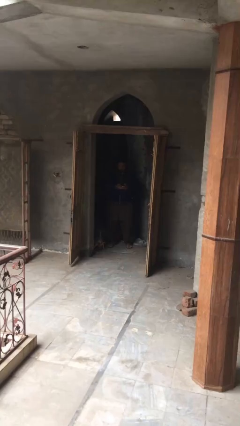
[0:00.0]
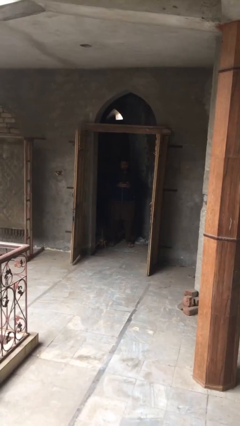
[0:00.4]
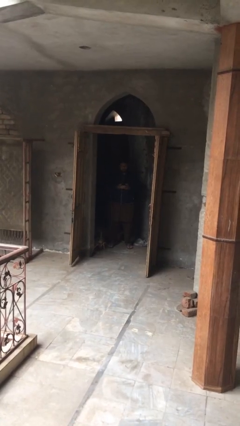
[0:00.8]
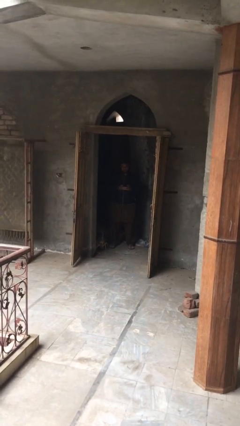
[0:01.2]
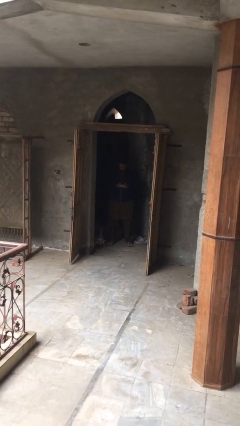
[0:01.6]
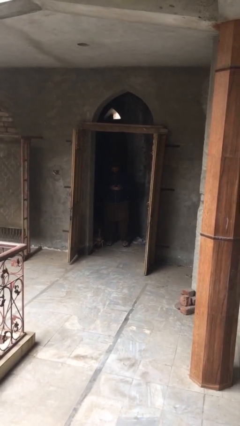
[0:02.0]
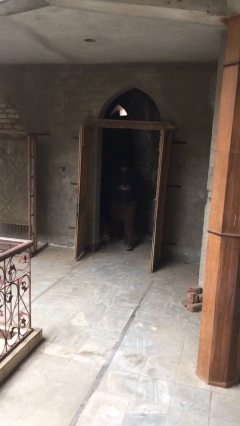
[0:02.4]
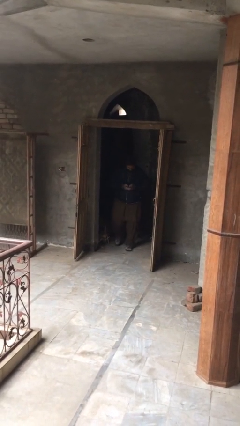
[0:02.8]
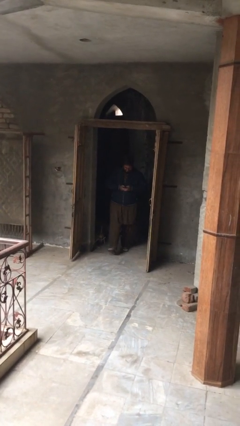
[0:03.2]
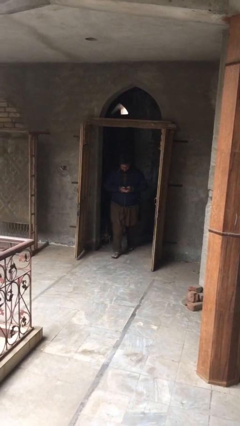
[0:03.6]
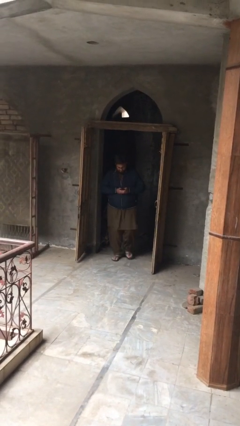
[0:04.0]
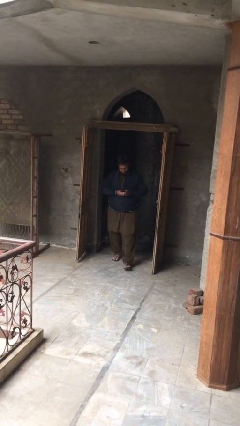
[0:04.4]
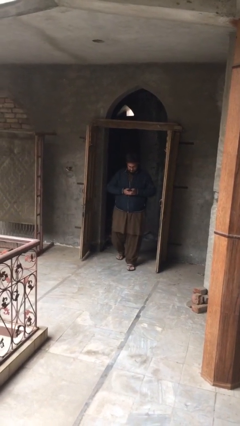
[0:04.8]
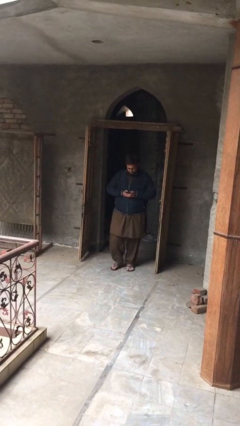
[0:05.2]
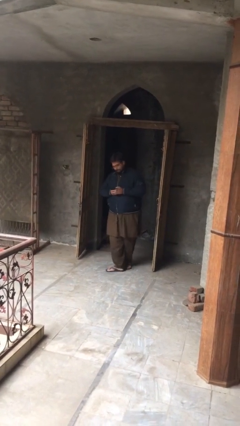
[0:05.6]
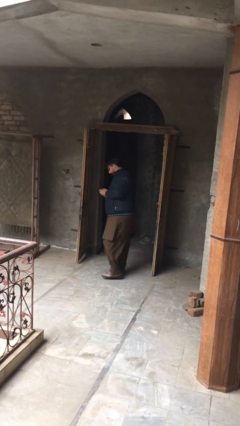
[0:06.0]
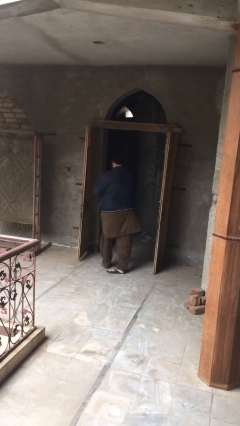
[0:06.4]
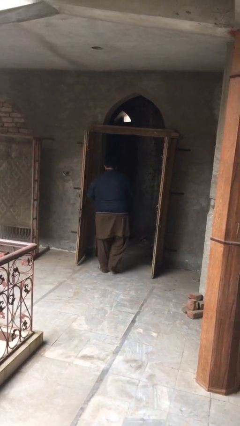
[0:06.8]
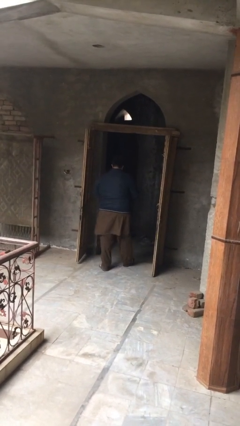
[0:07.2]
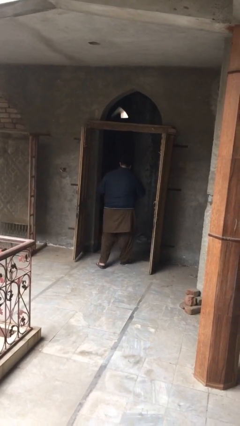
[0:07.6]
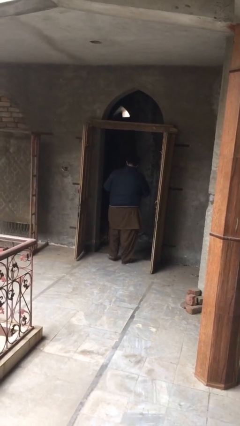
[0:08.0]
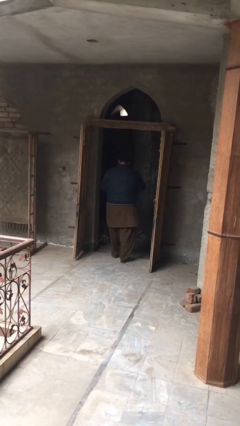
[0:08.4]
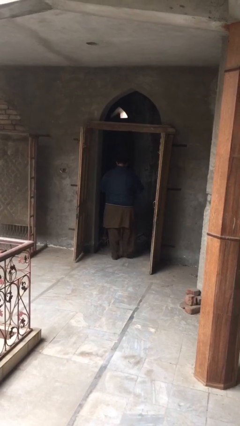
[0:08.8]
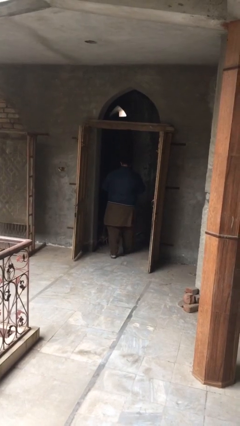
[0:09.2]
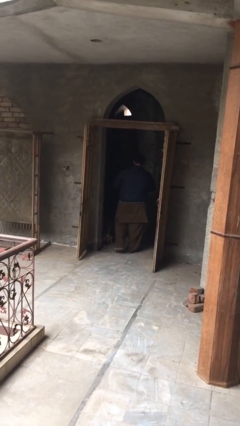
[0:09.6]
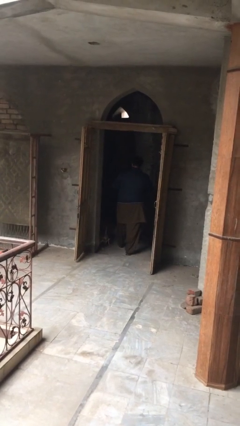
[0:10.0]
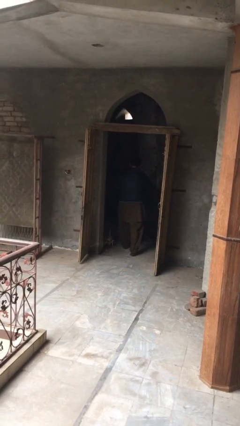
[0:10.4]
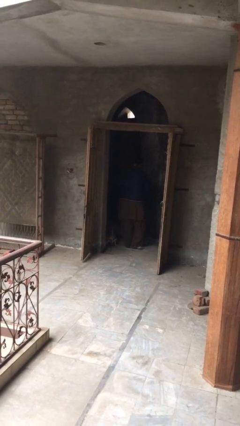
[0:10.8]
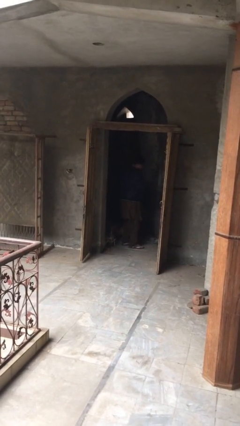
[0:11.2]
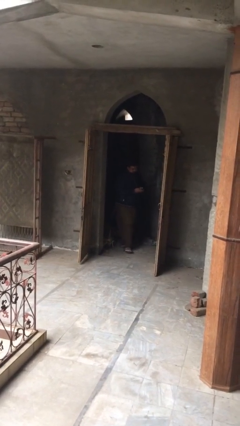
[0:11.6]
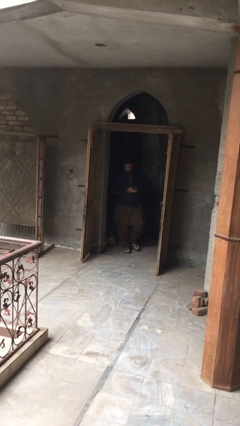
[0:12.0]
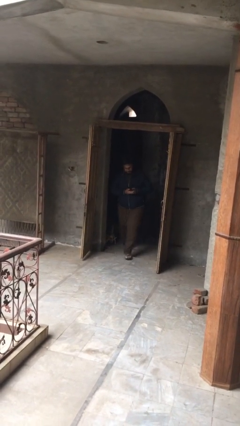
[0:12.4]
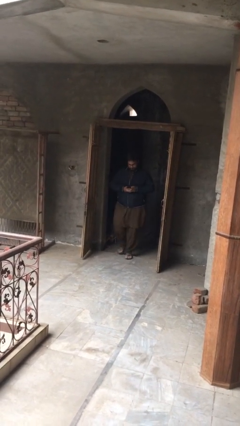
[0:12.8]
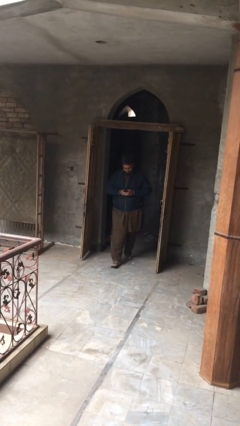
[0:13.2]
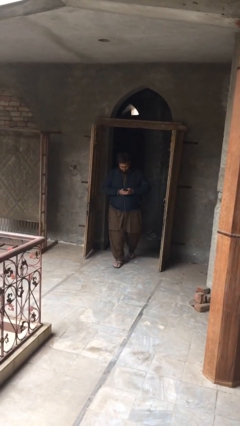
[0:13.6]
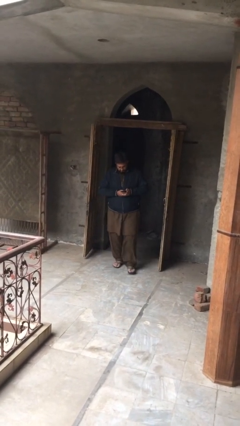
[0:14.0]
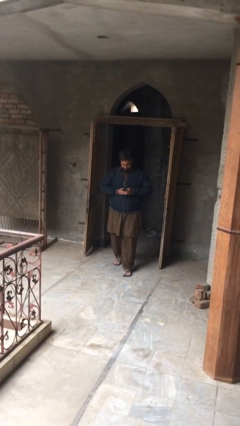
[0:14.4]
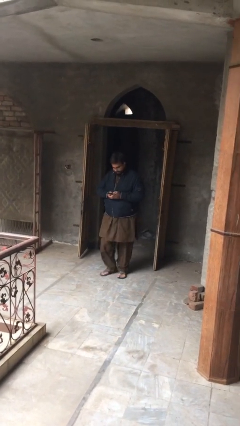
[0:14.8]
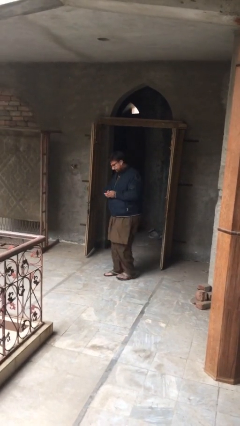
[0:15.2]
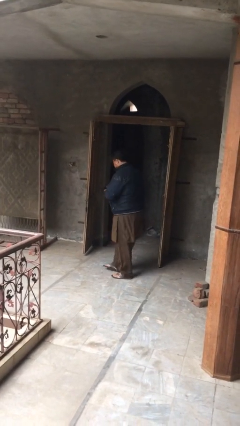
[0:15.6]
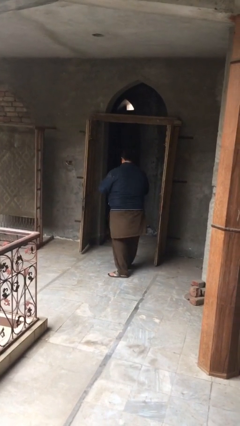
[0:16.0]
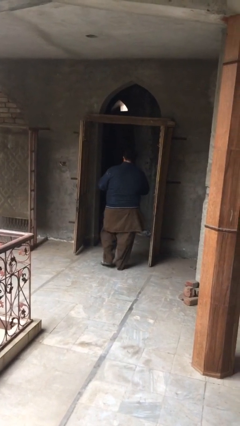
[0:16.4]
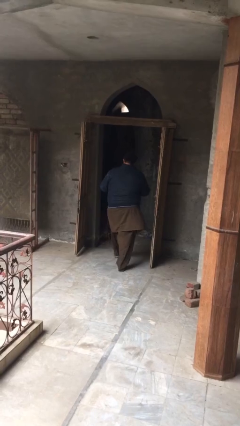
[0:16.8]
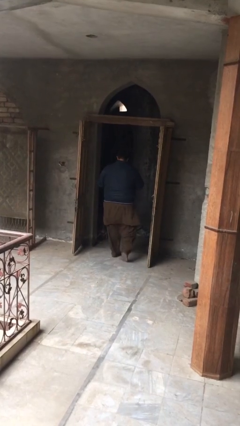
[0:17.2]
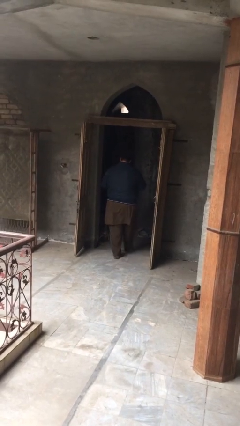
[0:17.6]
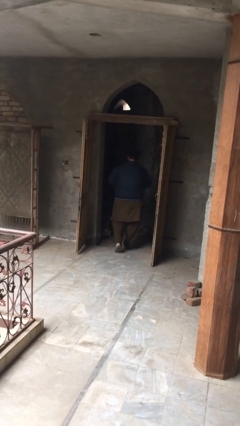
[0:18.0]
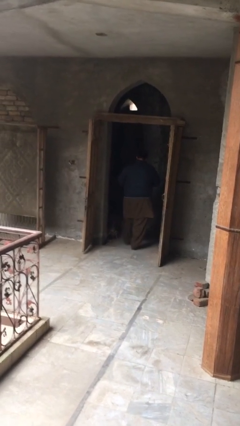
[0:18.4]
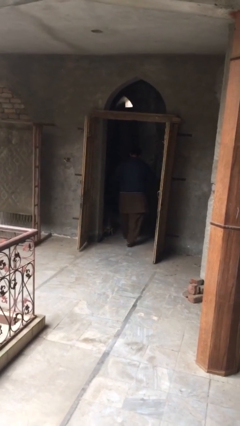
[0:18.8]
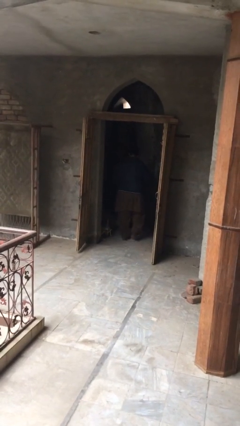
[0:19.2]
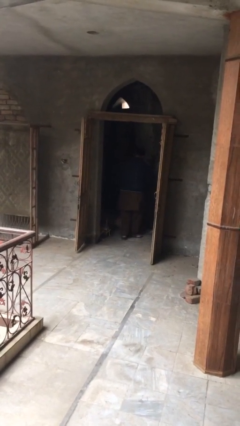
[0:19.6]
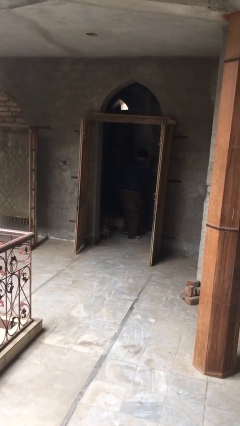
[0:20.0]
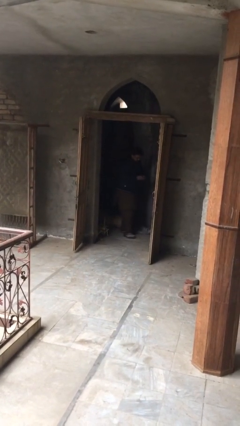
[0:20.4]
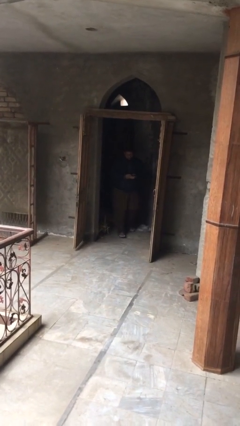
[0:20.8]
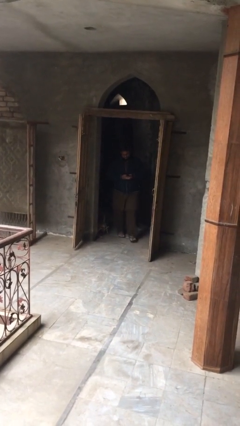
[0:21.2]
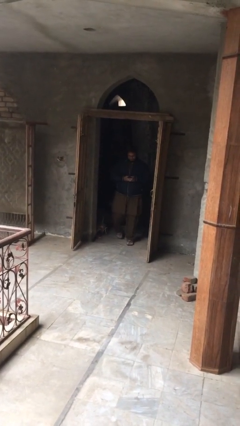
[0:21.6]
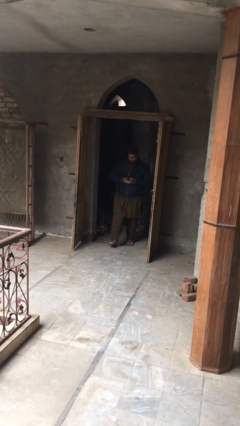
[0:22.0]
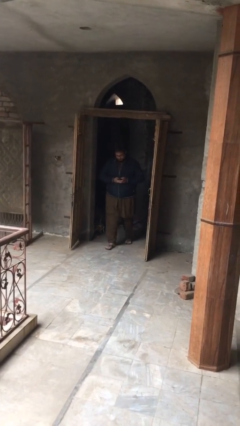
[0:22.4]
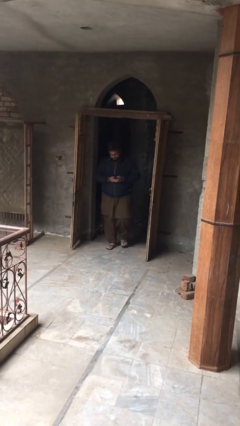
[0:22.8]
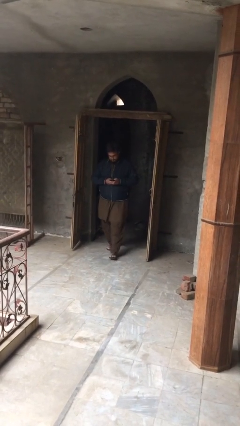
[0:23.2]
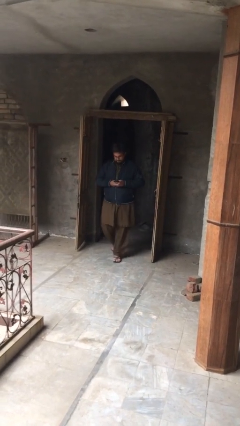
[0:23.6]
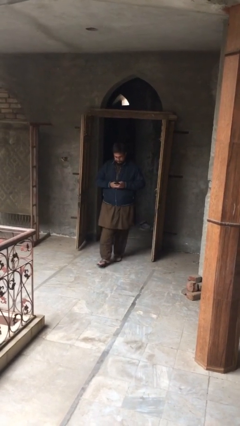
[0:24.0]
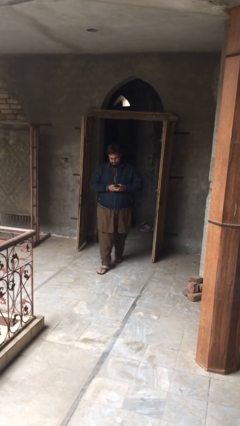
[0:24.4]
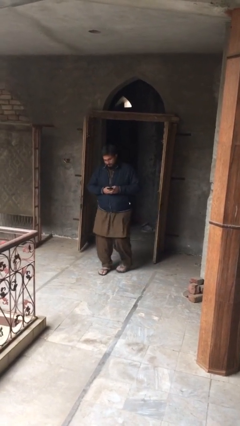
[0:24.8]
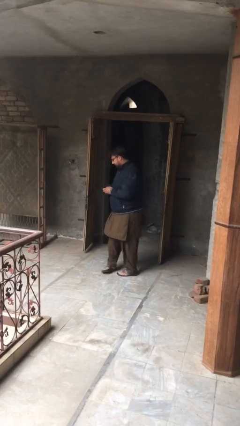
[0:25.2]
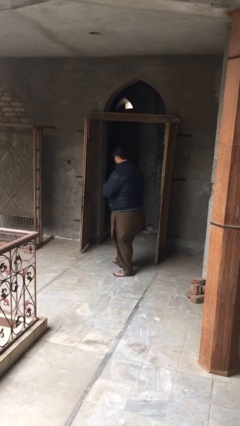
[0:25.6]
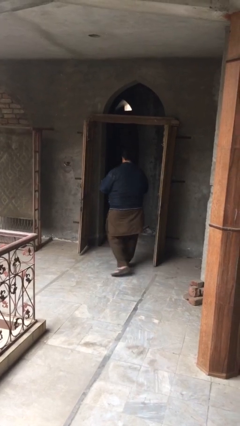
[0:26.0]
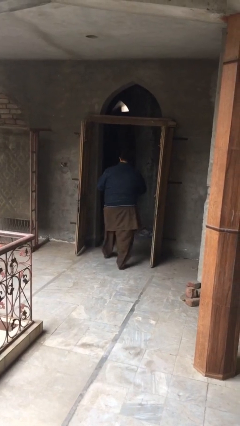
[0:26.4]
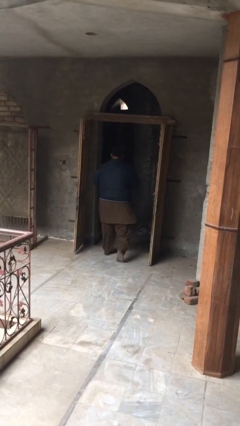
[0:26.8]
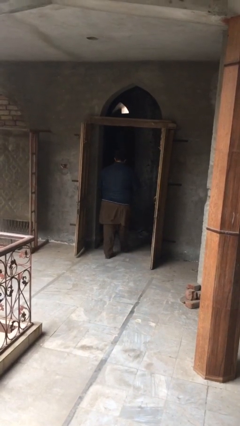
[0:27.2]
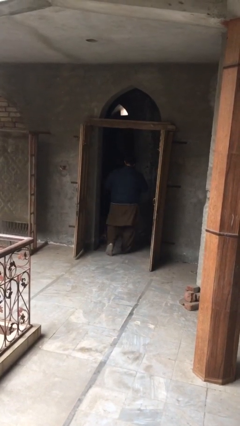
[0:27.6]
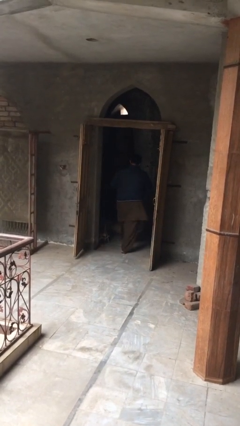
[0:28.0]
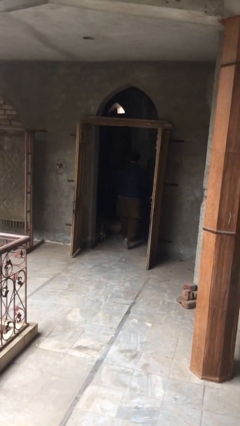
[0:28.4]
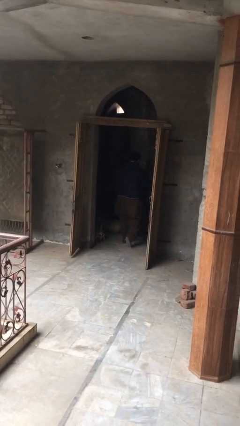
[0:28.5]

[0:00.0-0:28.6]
person texts on phone

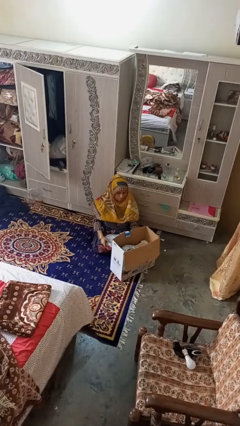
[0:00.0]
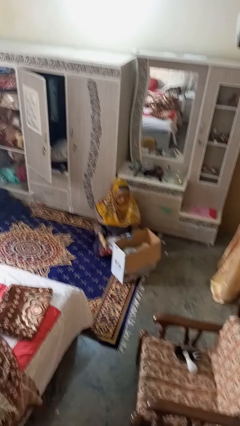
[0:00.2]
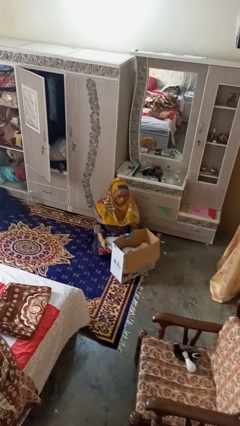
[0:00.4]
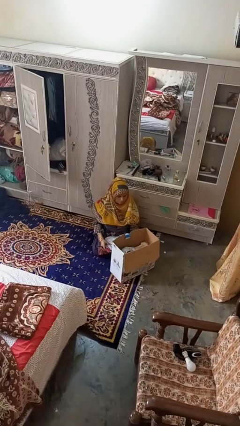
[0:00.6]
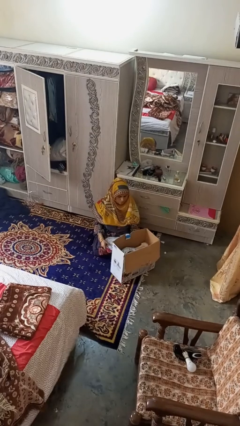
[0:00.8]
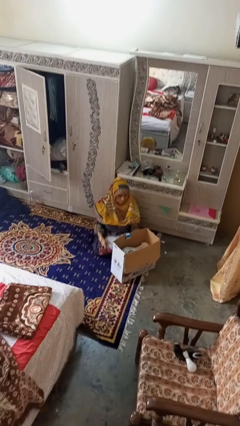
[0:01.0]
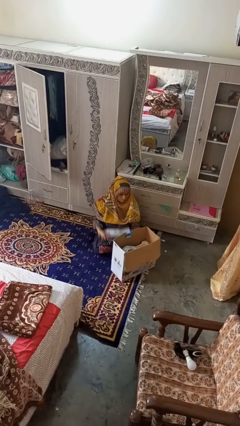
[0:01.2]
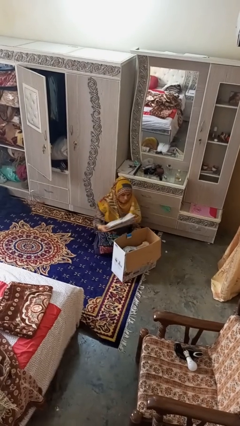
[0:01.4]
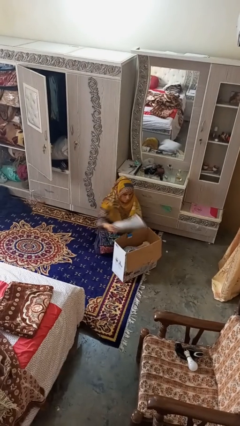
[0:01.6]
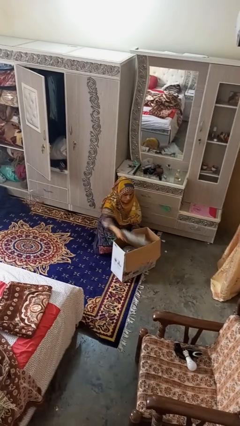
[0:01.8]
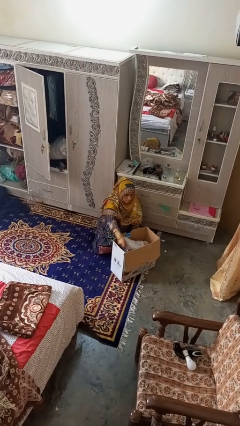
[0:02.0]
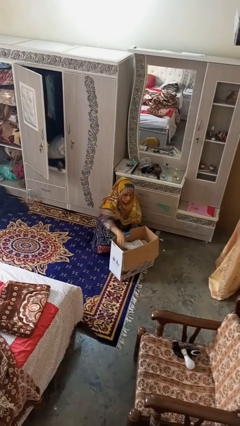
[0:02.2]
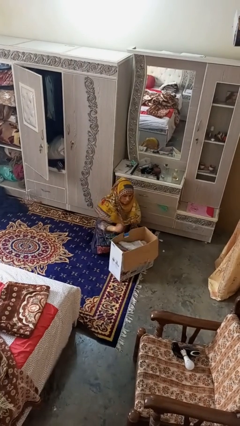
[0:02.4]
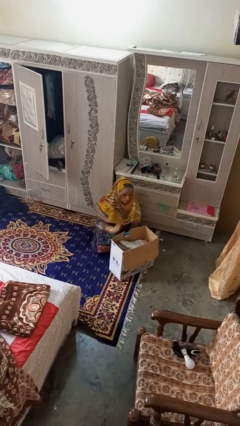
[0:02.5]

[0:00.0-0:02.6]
person puts object into box

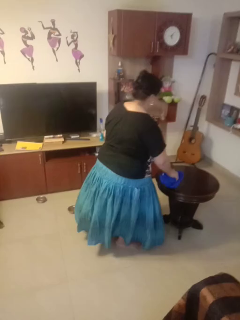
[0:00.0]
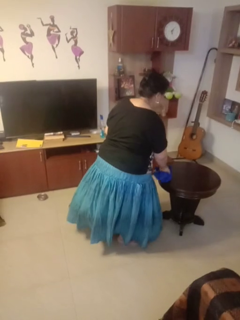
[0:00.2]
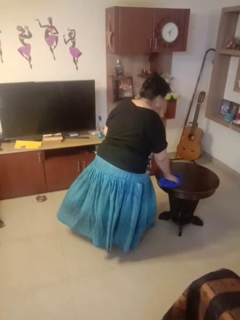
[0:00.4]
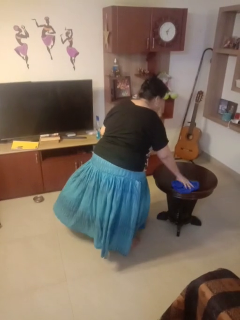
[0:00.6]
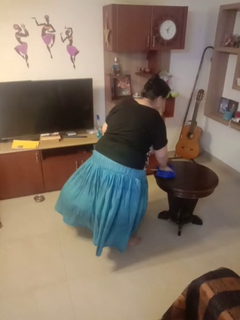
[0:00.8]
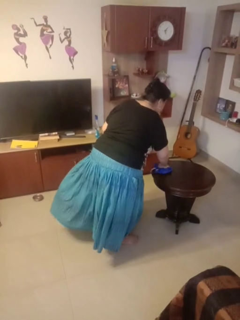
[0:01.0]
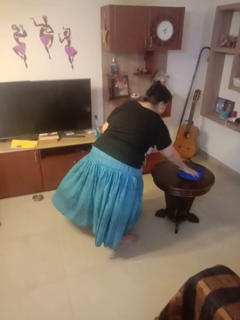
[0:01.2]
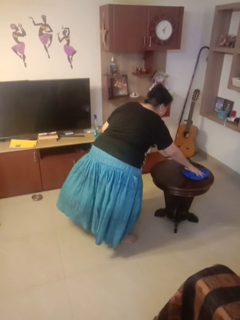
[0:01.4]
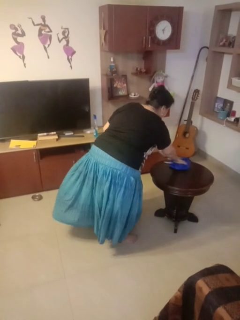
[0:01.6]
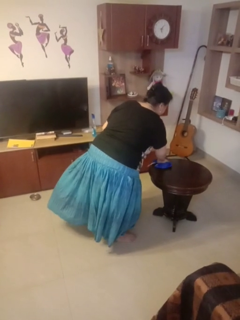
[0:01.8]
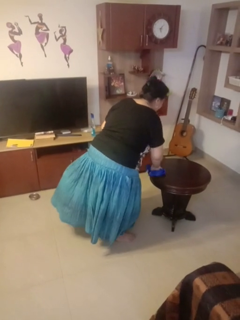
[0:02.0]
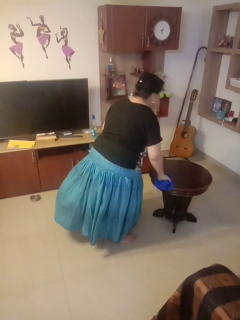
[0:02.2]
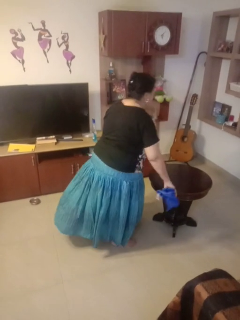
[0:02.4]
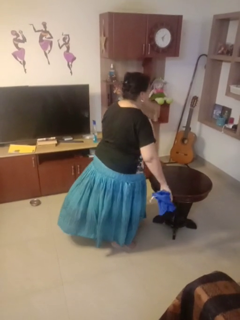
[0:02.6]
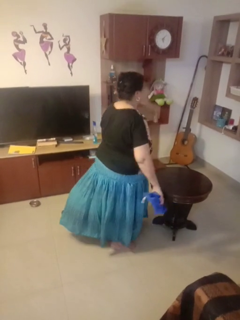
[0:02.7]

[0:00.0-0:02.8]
person cleans table with rag
